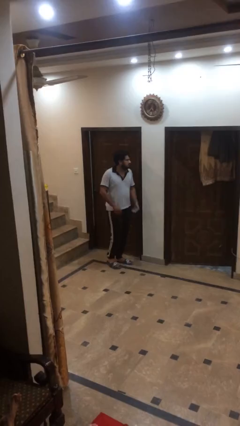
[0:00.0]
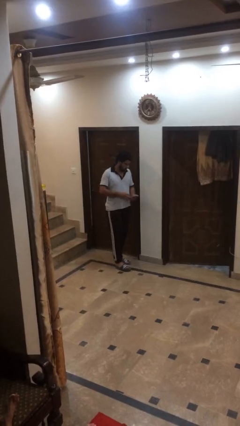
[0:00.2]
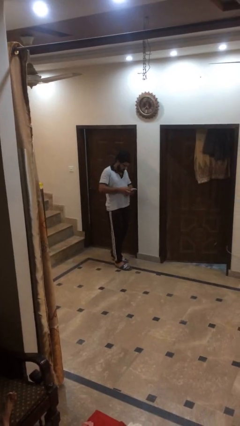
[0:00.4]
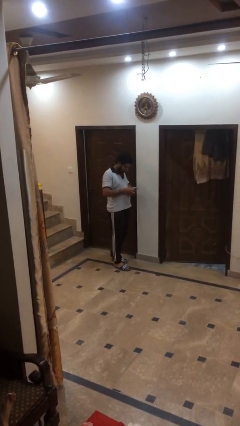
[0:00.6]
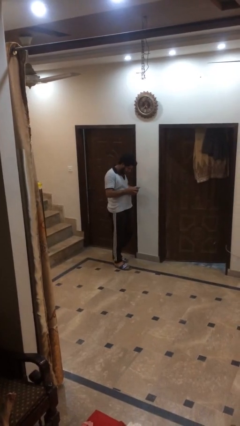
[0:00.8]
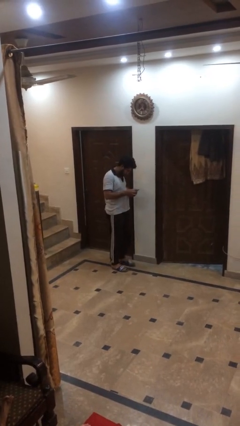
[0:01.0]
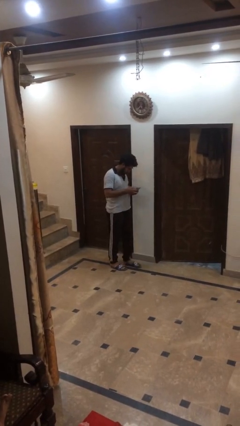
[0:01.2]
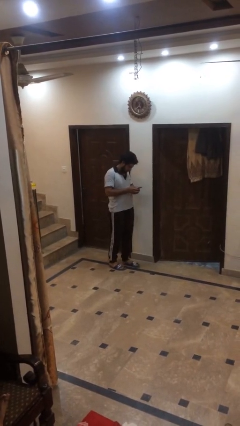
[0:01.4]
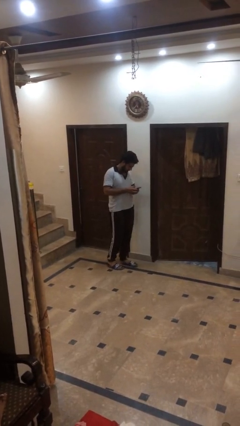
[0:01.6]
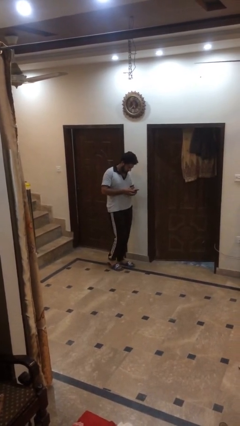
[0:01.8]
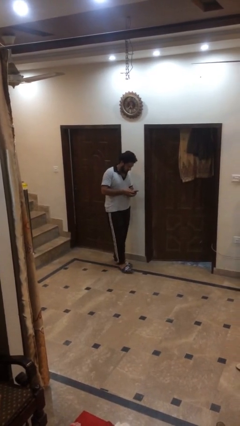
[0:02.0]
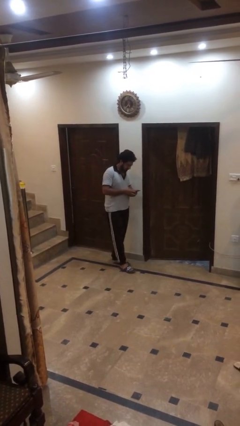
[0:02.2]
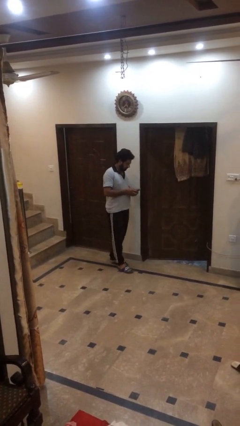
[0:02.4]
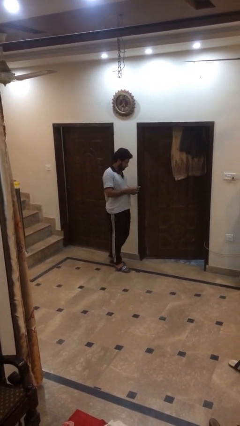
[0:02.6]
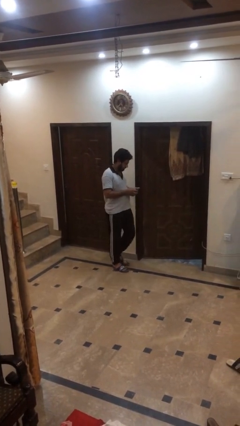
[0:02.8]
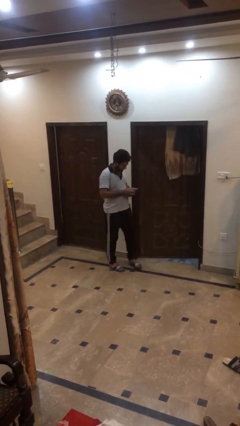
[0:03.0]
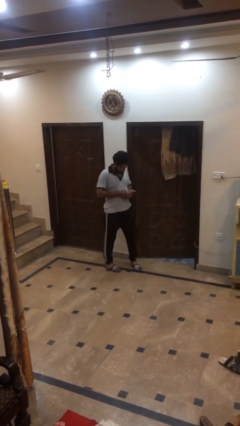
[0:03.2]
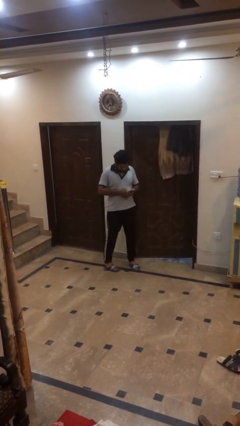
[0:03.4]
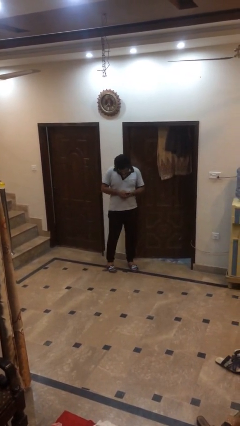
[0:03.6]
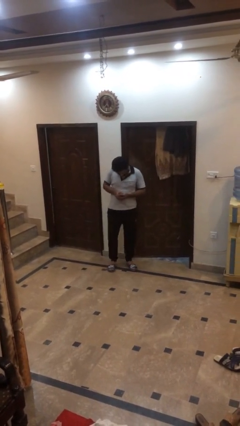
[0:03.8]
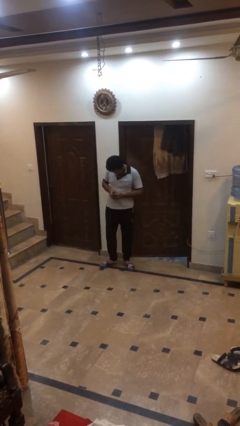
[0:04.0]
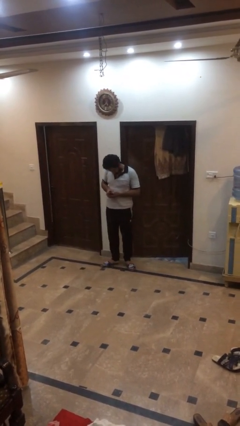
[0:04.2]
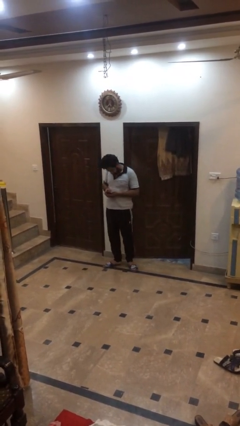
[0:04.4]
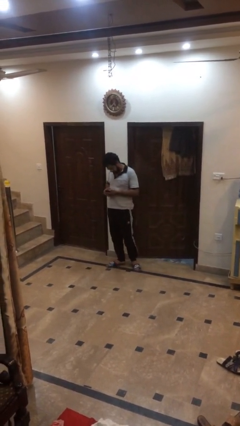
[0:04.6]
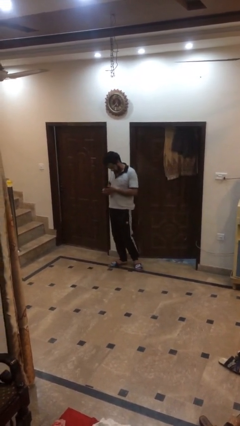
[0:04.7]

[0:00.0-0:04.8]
person texts on phone

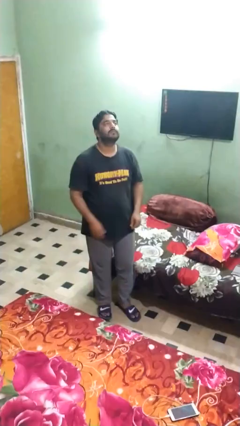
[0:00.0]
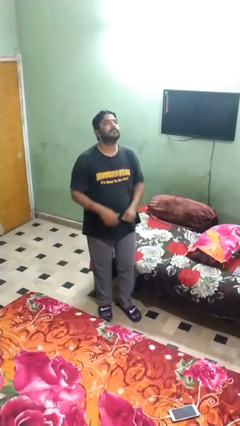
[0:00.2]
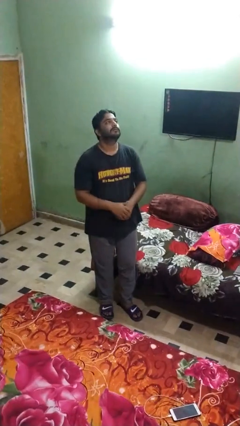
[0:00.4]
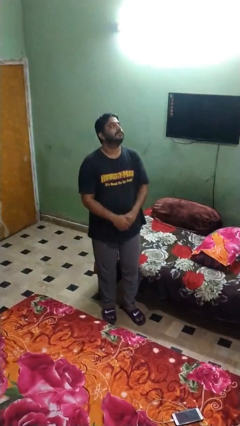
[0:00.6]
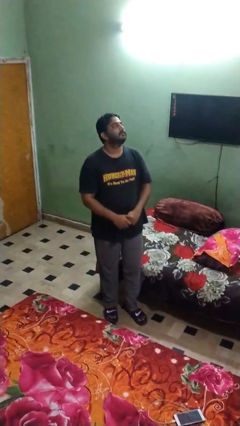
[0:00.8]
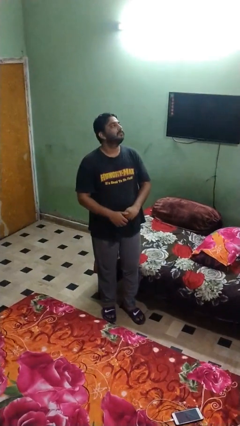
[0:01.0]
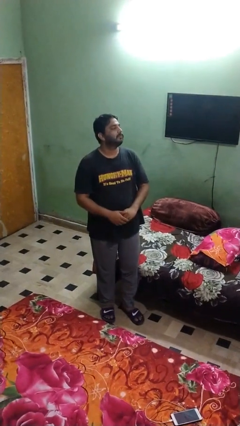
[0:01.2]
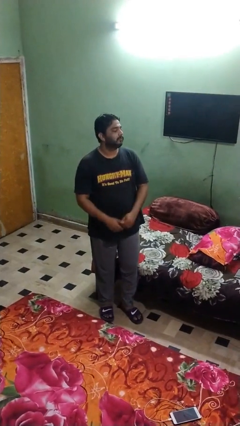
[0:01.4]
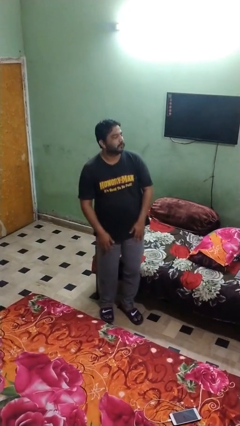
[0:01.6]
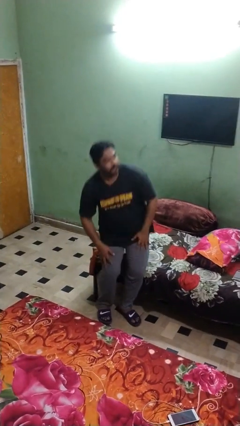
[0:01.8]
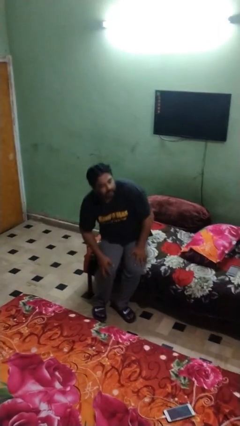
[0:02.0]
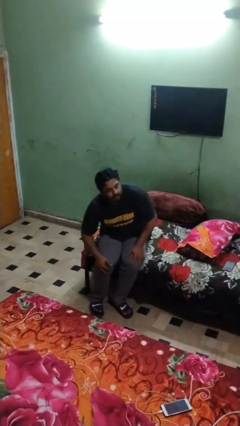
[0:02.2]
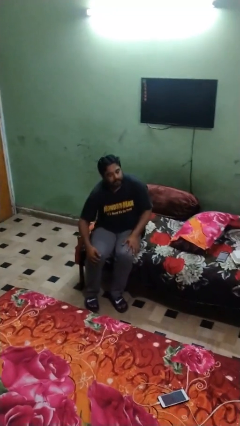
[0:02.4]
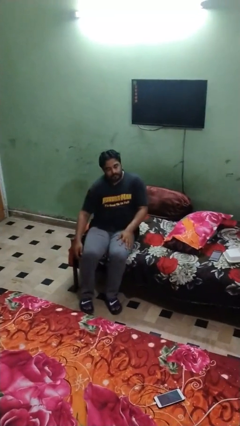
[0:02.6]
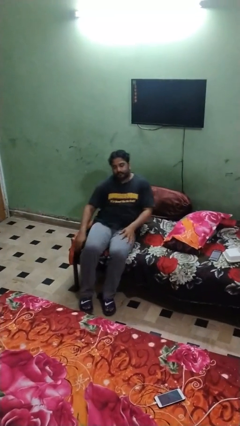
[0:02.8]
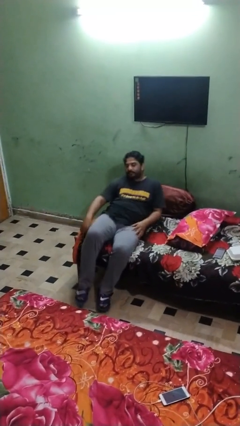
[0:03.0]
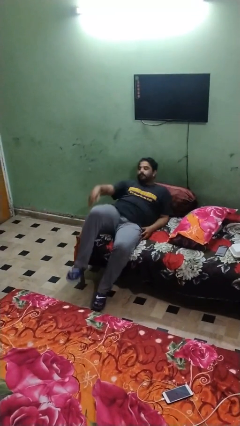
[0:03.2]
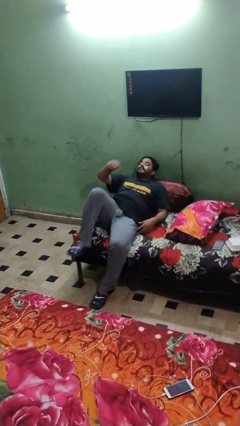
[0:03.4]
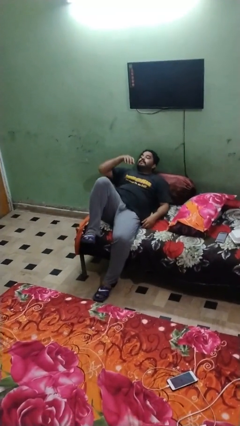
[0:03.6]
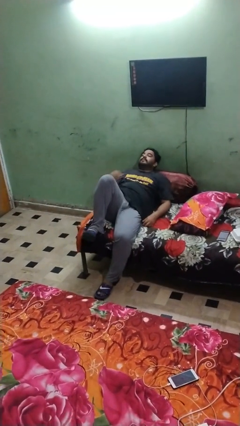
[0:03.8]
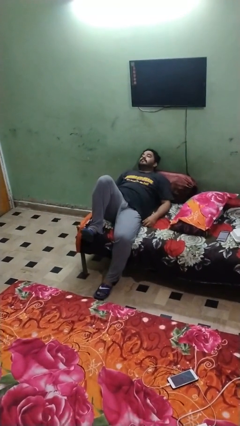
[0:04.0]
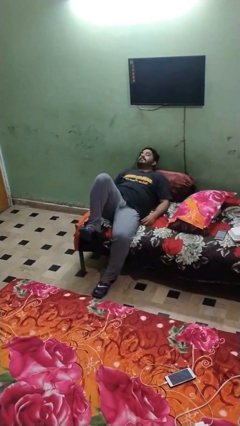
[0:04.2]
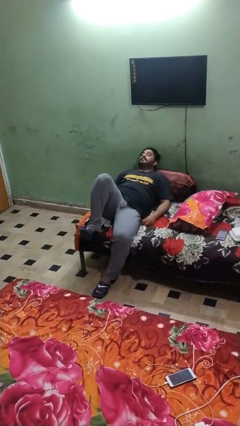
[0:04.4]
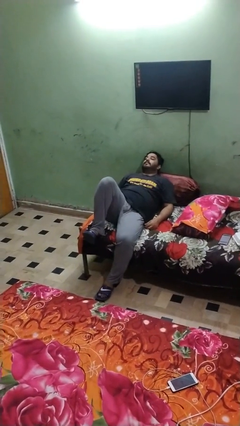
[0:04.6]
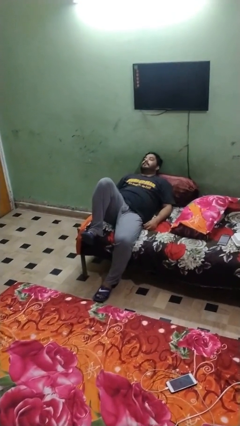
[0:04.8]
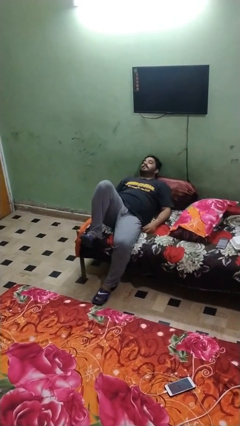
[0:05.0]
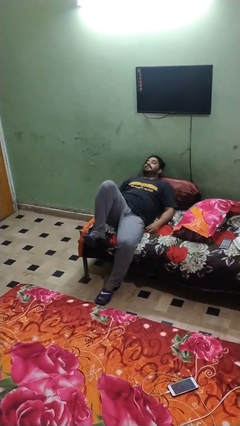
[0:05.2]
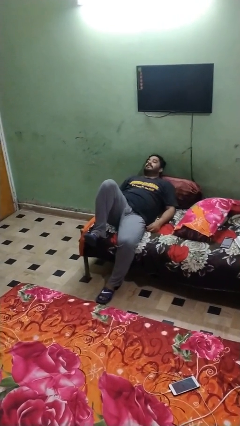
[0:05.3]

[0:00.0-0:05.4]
person lies down on couch

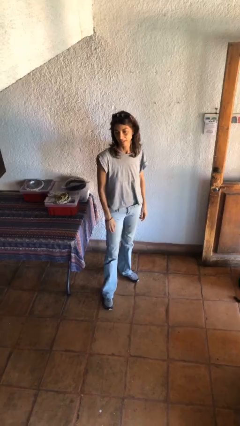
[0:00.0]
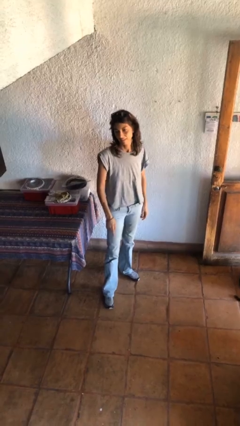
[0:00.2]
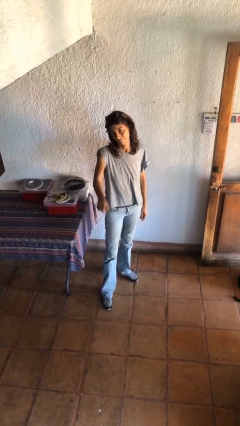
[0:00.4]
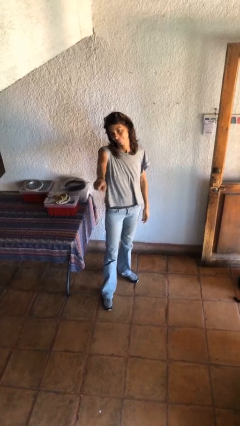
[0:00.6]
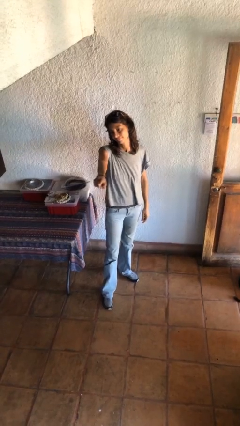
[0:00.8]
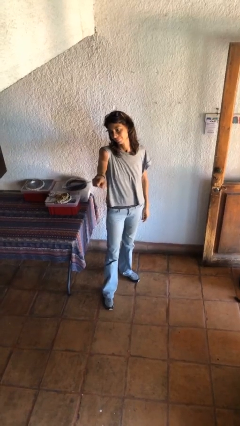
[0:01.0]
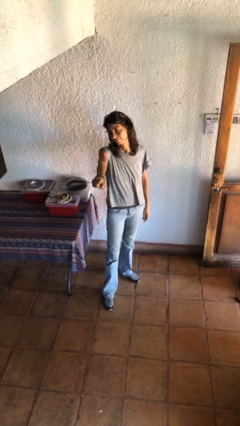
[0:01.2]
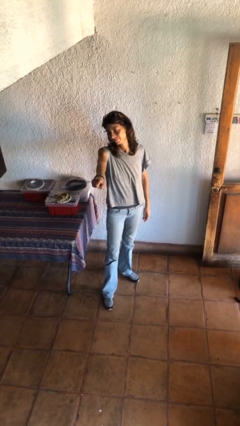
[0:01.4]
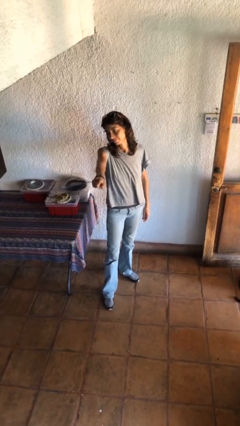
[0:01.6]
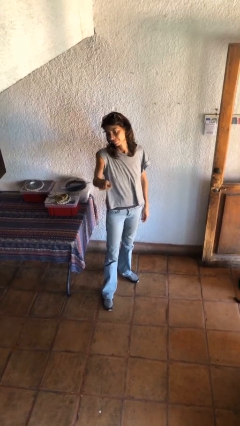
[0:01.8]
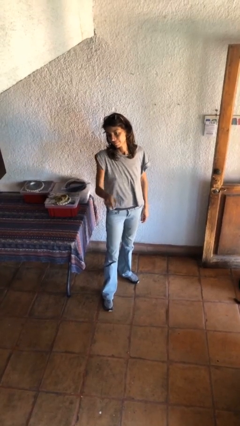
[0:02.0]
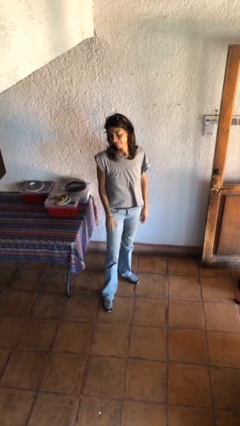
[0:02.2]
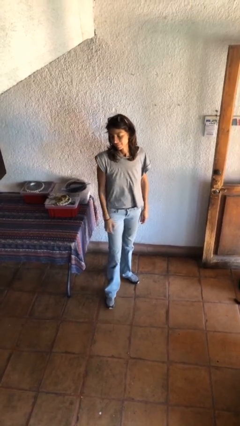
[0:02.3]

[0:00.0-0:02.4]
person points at person

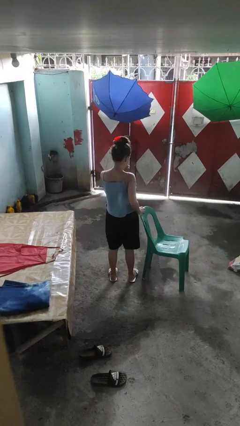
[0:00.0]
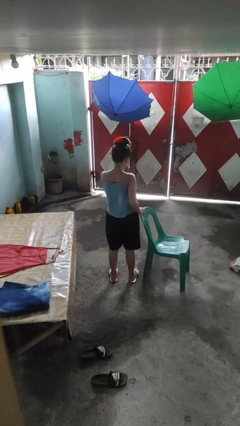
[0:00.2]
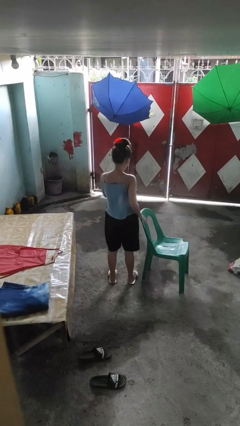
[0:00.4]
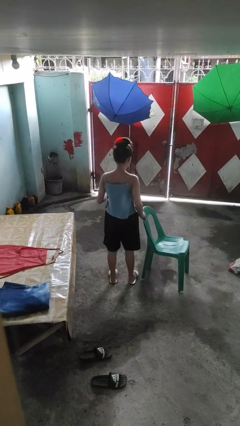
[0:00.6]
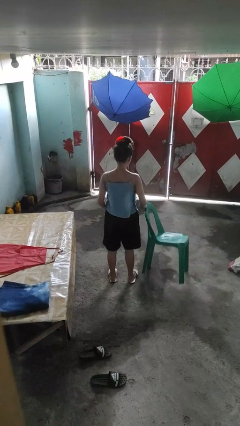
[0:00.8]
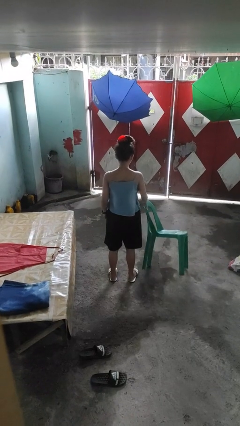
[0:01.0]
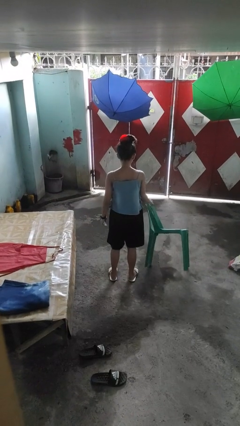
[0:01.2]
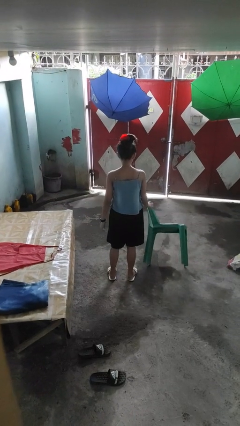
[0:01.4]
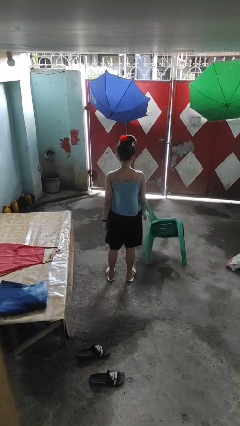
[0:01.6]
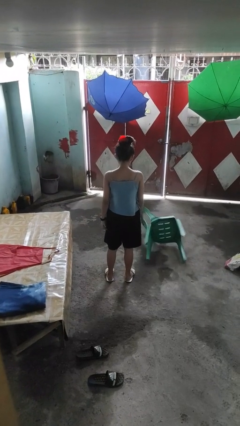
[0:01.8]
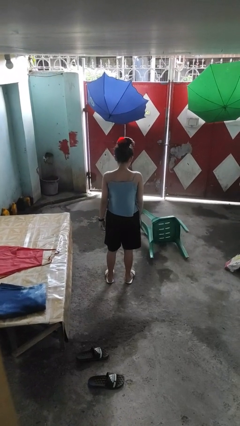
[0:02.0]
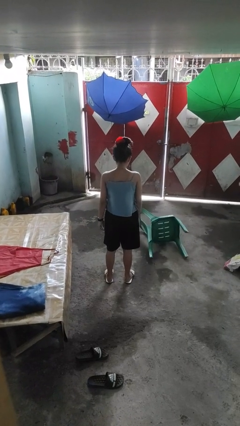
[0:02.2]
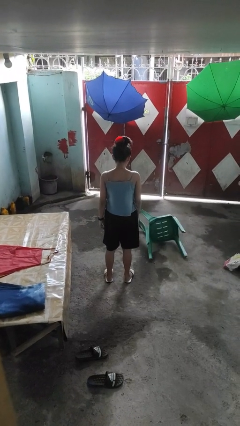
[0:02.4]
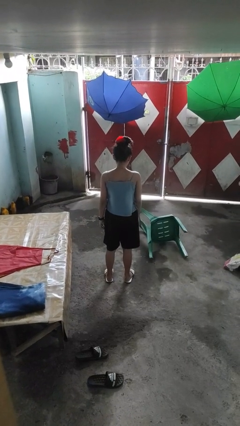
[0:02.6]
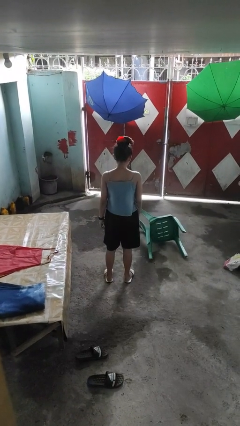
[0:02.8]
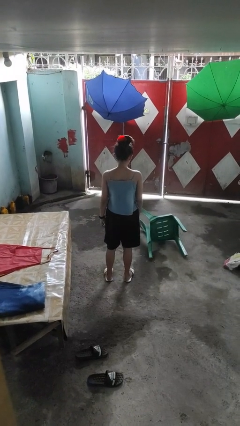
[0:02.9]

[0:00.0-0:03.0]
person knocks over furniture

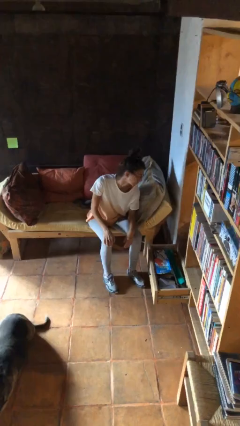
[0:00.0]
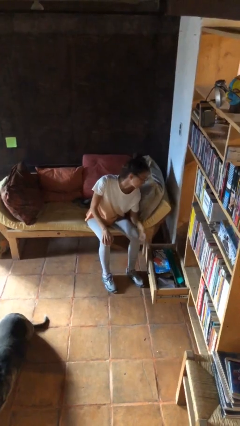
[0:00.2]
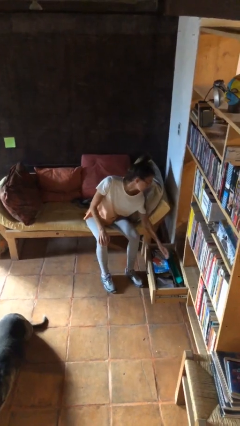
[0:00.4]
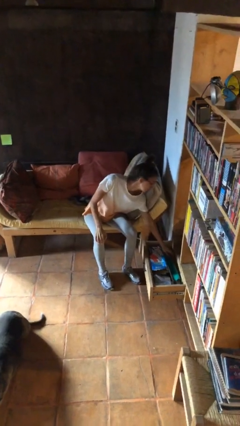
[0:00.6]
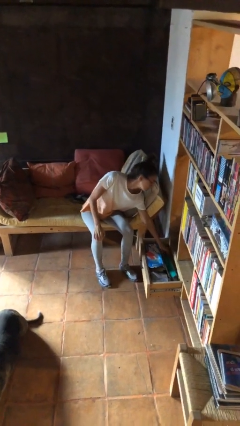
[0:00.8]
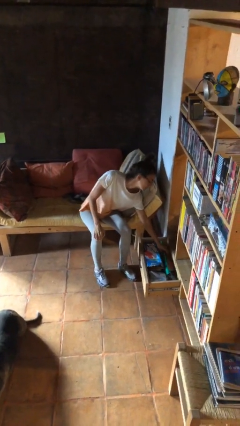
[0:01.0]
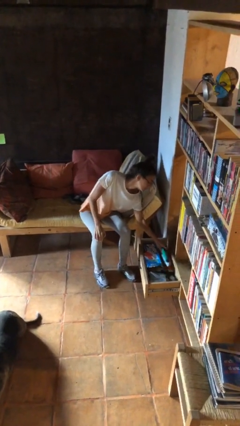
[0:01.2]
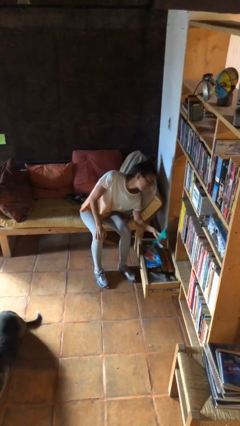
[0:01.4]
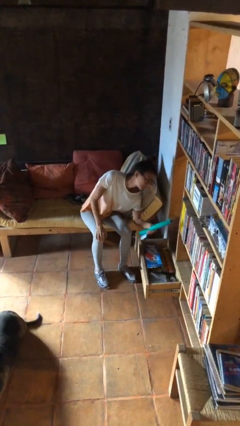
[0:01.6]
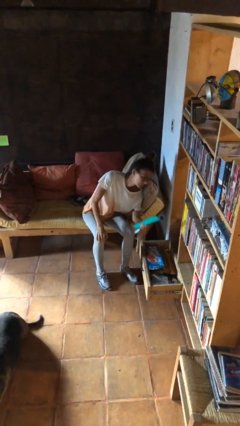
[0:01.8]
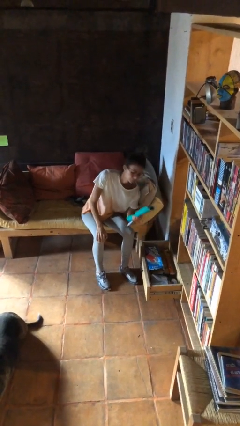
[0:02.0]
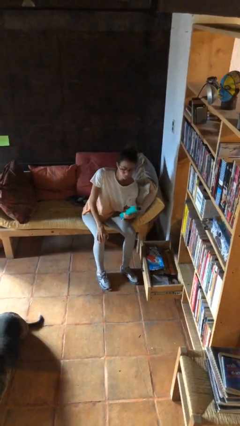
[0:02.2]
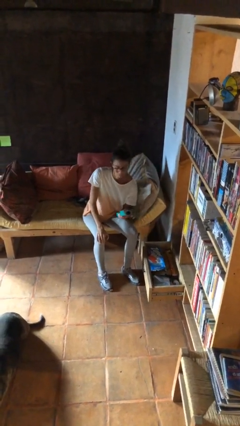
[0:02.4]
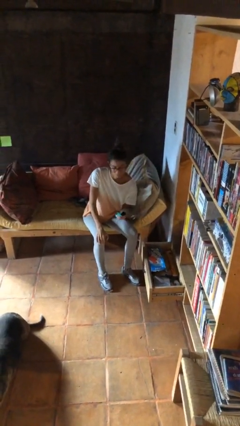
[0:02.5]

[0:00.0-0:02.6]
person picks up object from cabinet
